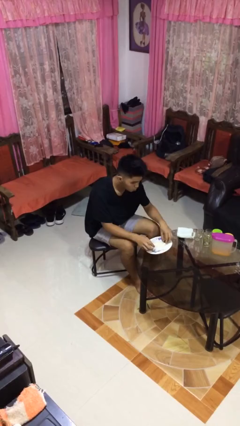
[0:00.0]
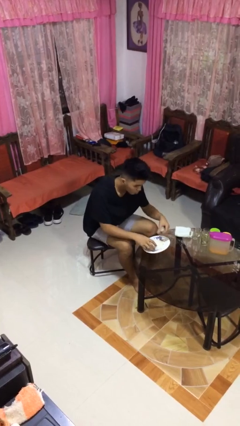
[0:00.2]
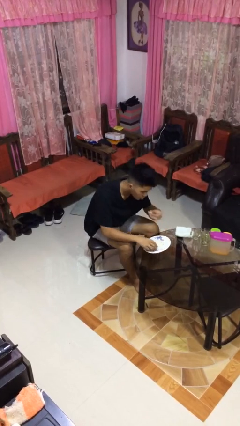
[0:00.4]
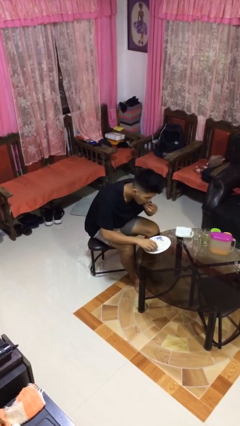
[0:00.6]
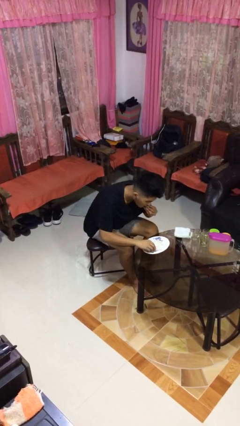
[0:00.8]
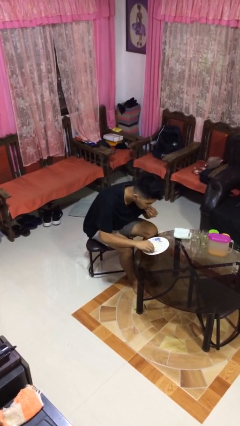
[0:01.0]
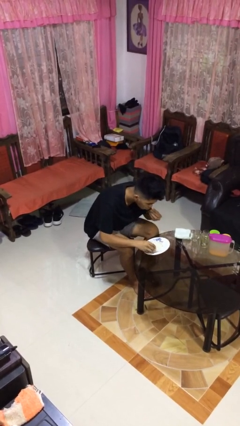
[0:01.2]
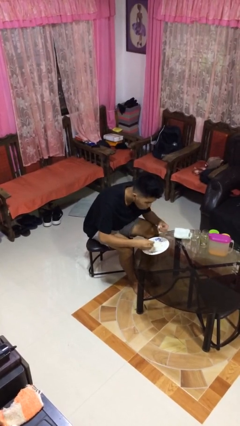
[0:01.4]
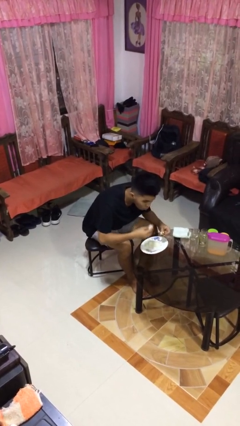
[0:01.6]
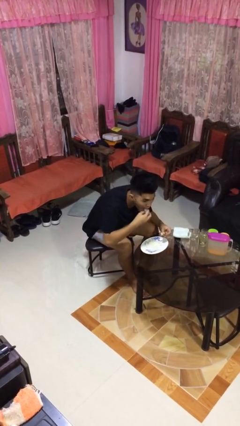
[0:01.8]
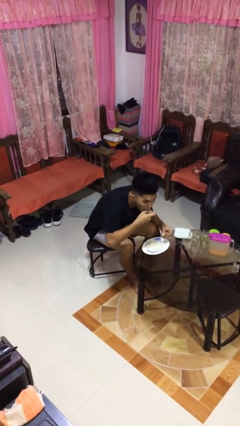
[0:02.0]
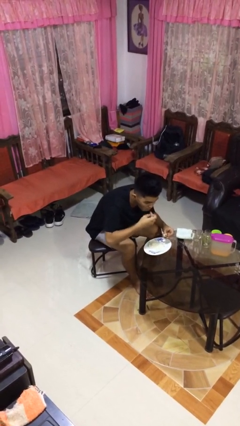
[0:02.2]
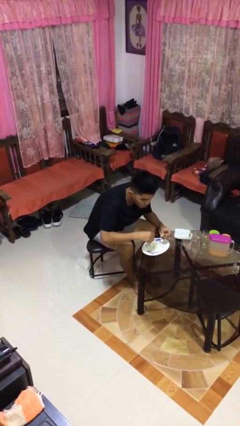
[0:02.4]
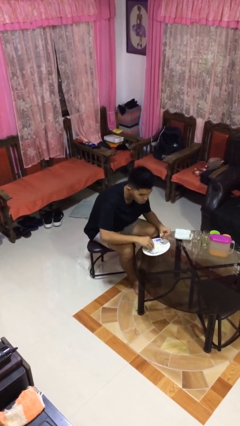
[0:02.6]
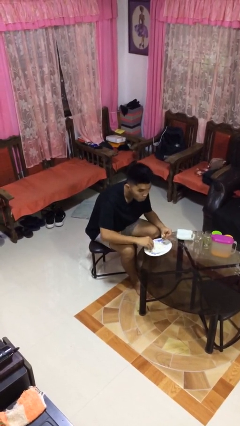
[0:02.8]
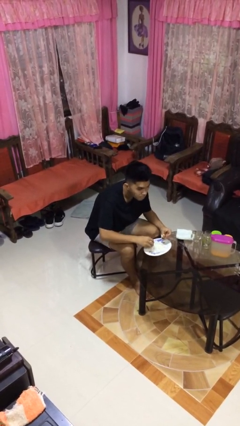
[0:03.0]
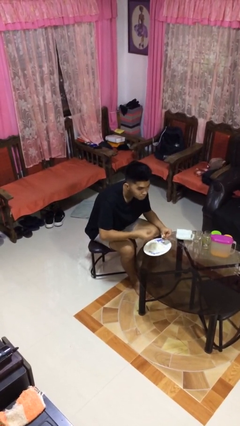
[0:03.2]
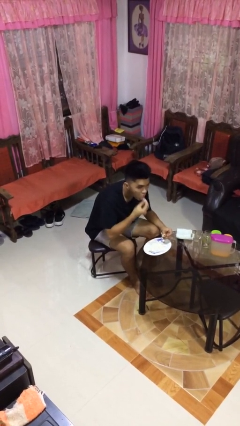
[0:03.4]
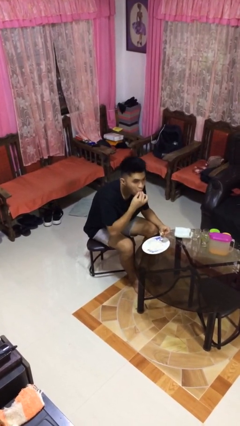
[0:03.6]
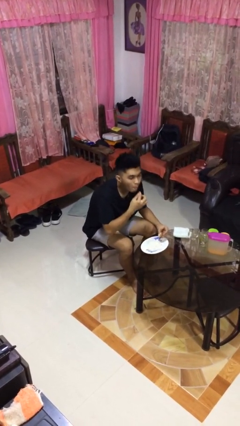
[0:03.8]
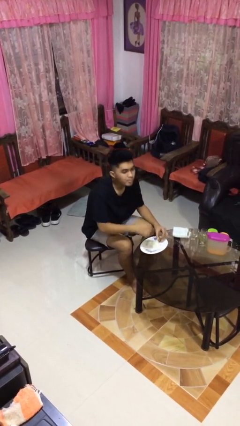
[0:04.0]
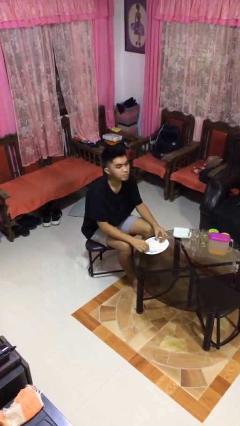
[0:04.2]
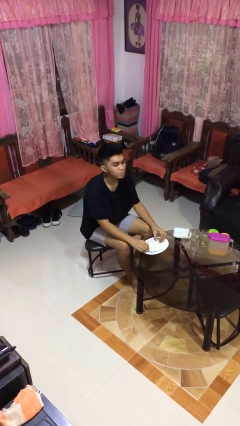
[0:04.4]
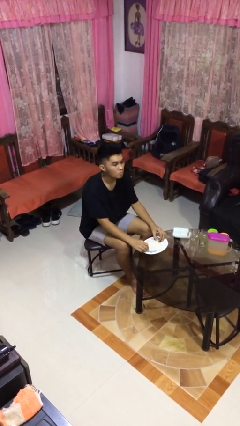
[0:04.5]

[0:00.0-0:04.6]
person eats with hands

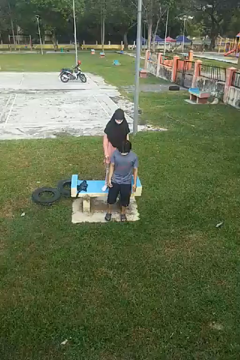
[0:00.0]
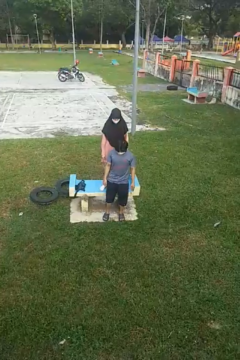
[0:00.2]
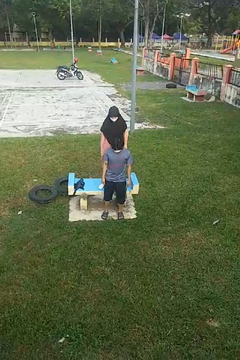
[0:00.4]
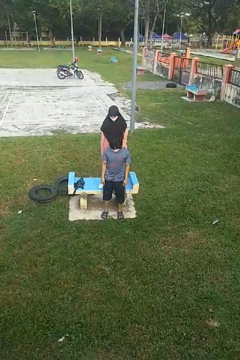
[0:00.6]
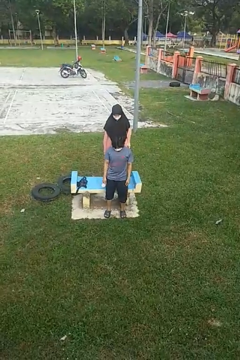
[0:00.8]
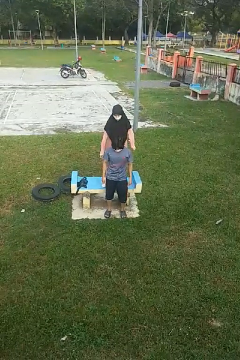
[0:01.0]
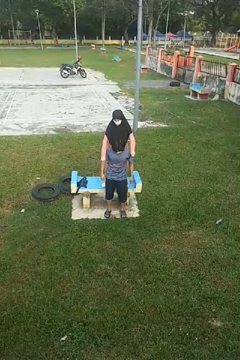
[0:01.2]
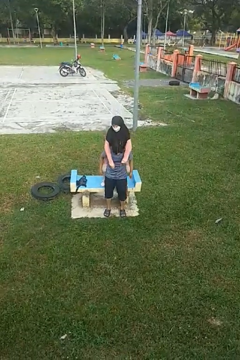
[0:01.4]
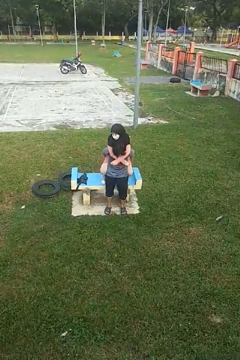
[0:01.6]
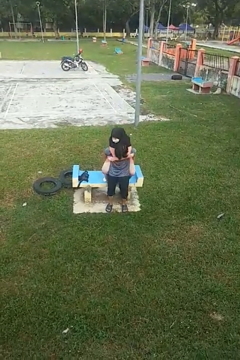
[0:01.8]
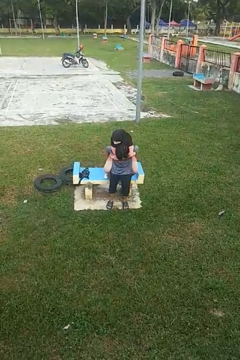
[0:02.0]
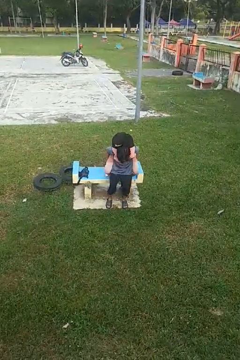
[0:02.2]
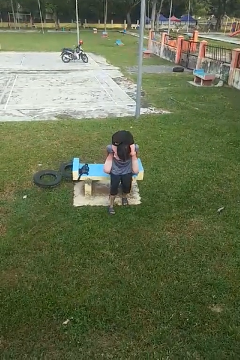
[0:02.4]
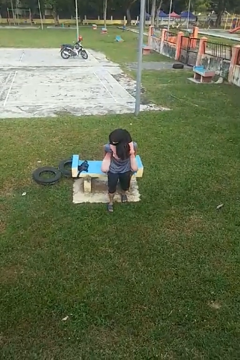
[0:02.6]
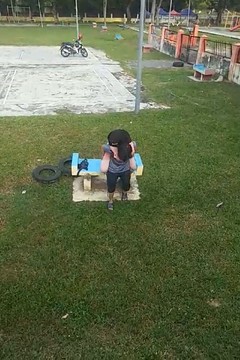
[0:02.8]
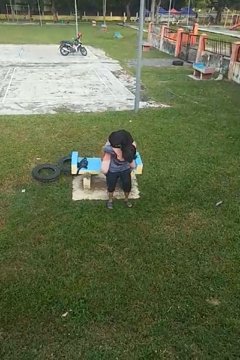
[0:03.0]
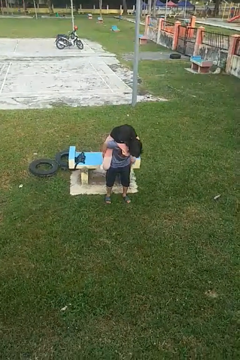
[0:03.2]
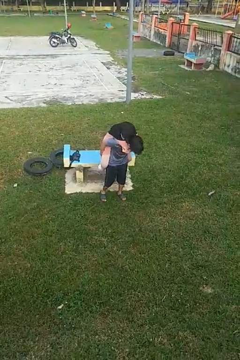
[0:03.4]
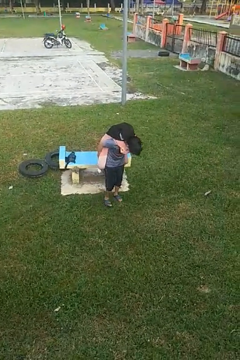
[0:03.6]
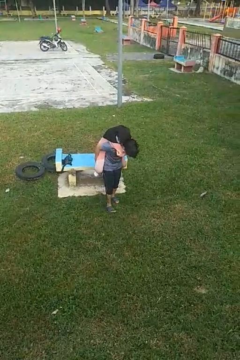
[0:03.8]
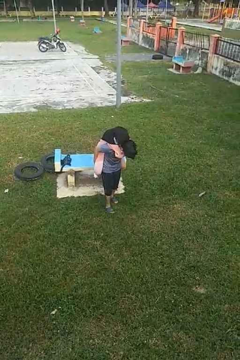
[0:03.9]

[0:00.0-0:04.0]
person carries person over shoulder

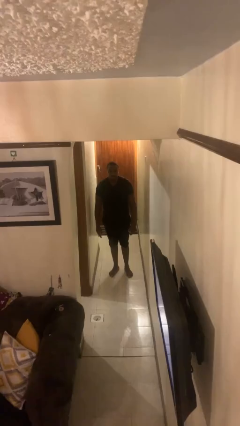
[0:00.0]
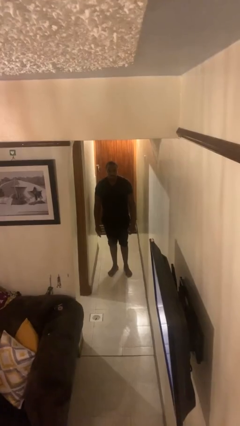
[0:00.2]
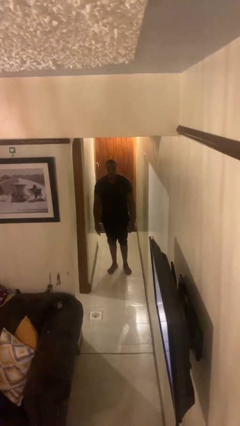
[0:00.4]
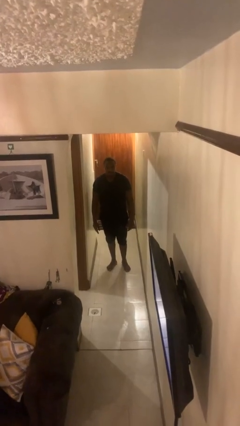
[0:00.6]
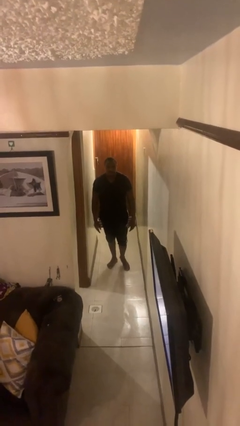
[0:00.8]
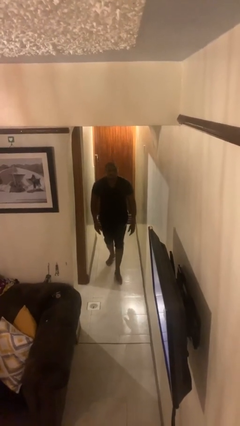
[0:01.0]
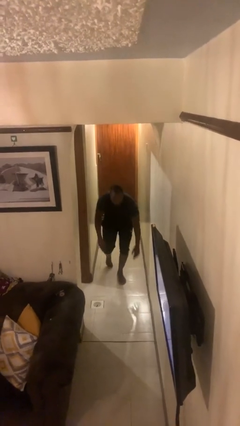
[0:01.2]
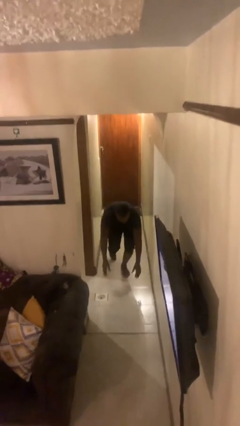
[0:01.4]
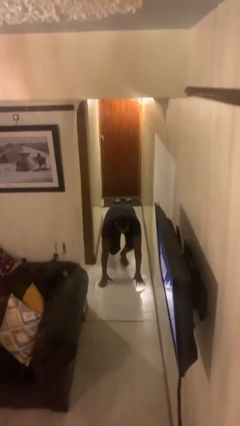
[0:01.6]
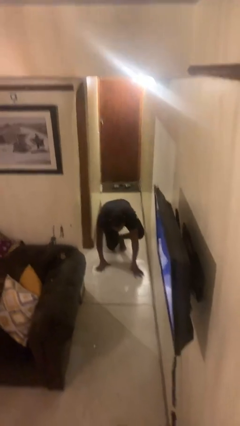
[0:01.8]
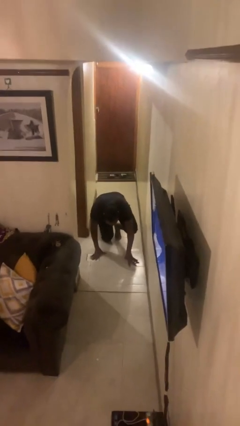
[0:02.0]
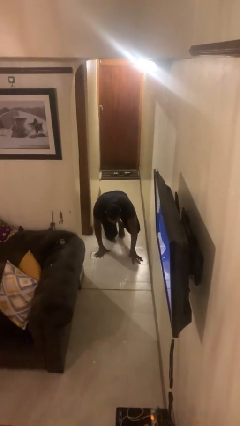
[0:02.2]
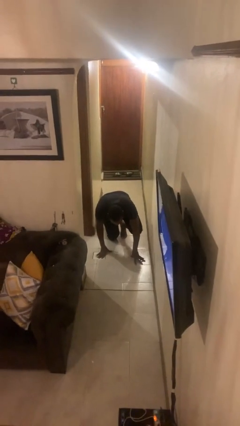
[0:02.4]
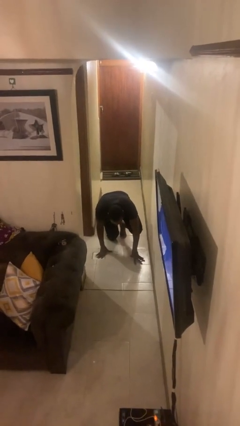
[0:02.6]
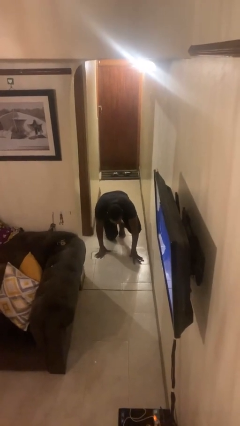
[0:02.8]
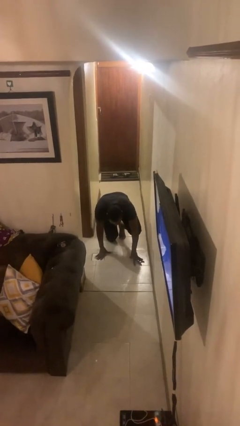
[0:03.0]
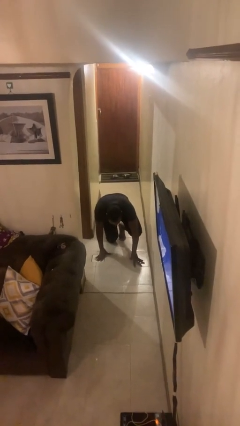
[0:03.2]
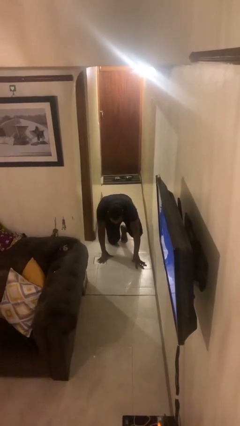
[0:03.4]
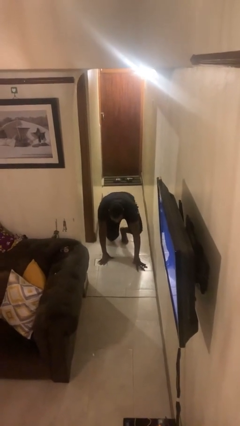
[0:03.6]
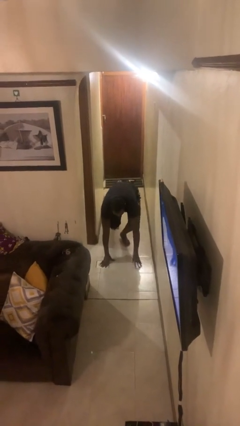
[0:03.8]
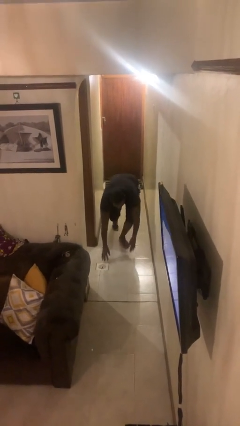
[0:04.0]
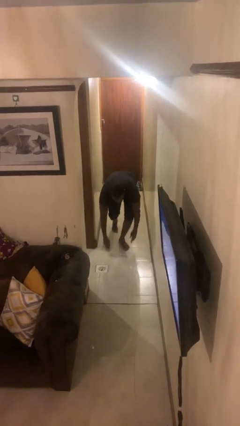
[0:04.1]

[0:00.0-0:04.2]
person trips on object on floor

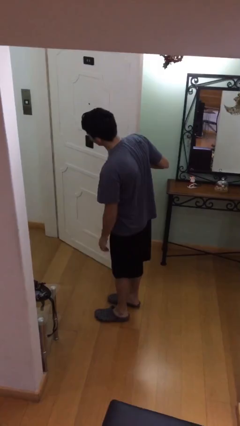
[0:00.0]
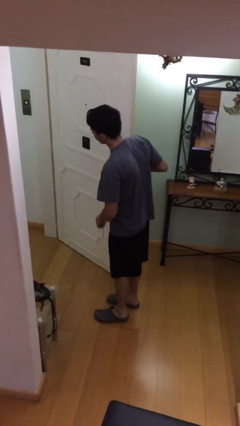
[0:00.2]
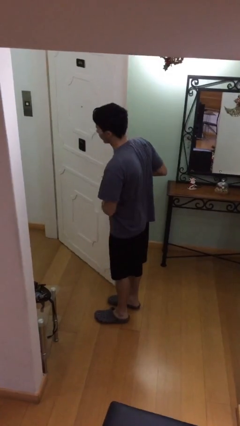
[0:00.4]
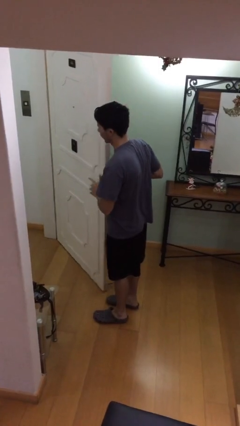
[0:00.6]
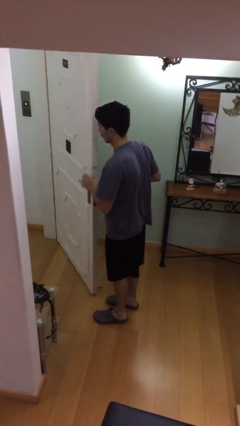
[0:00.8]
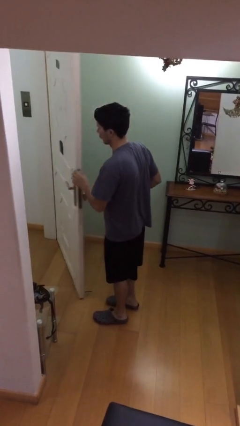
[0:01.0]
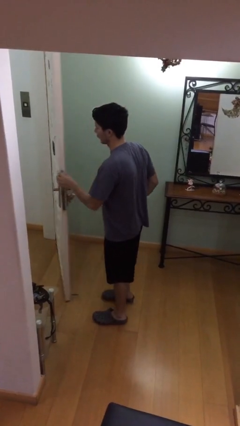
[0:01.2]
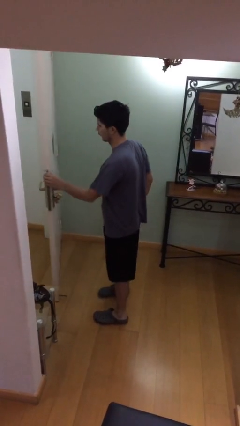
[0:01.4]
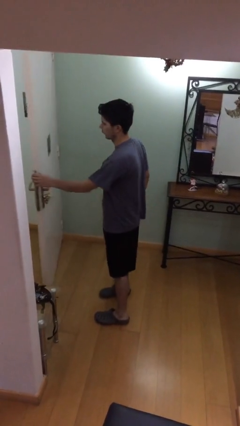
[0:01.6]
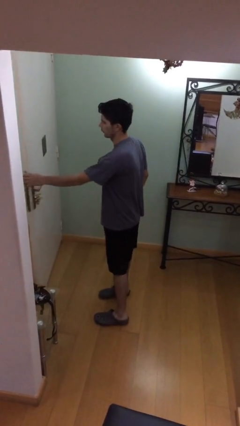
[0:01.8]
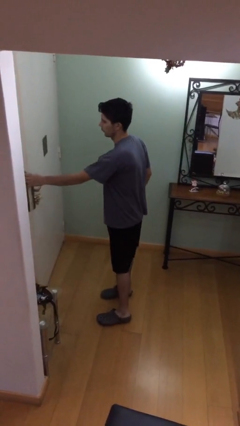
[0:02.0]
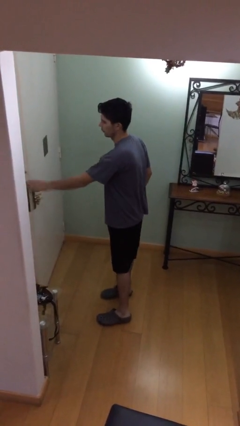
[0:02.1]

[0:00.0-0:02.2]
person closes facility door

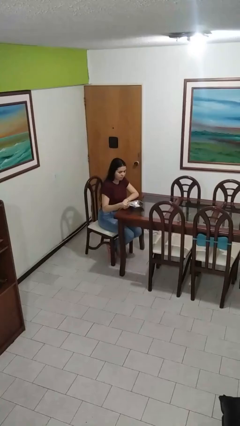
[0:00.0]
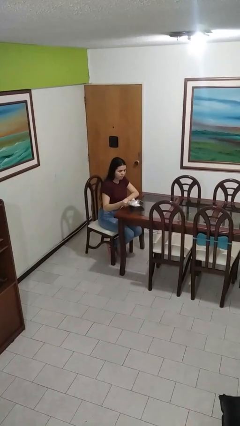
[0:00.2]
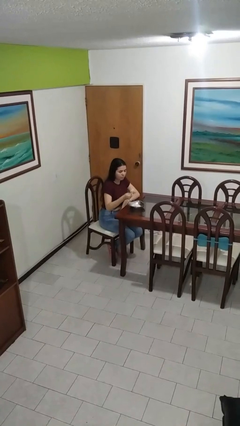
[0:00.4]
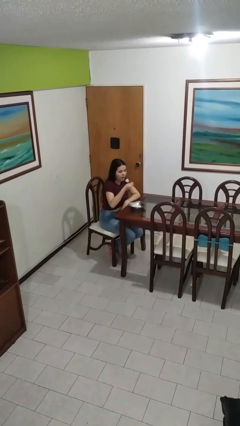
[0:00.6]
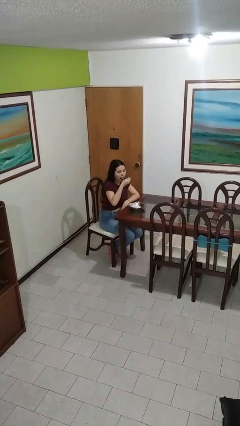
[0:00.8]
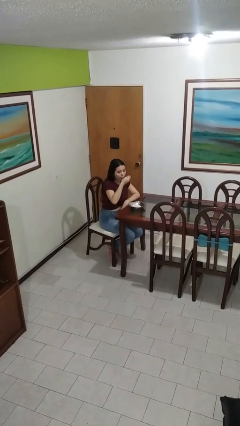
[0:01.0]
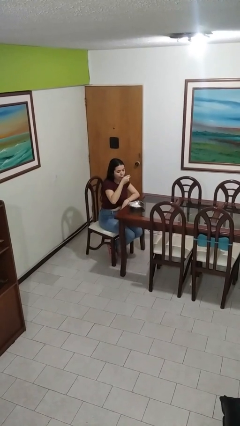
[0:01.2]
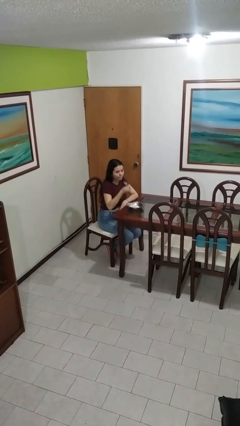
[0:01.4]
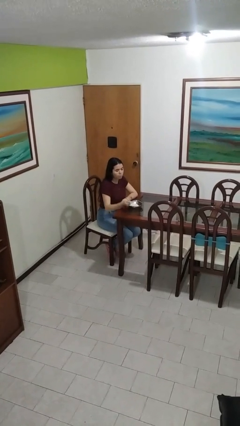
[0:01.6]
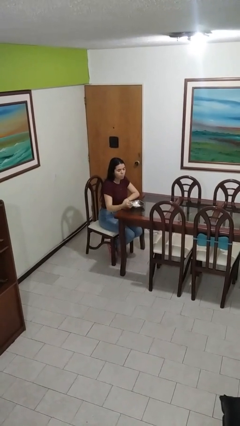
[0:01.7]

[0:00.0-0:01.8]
person eats with utensil

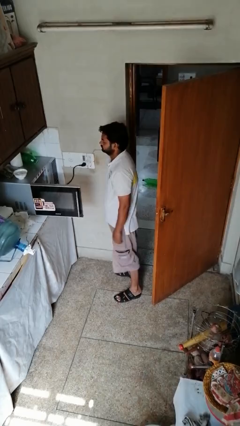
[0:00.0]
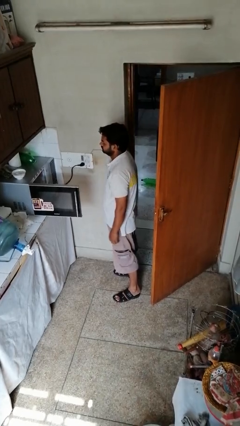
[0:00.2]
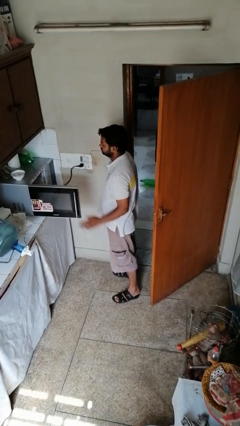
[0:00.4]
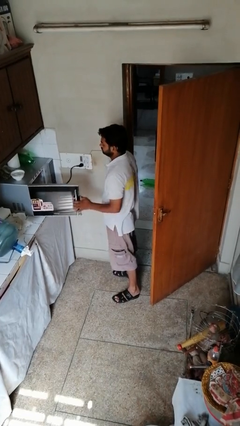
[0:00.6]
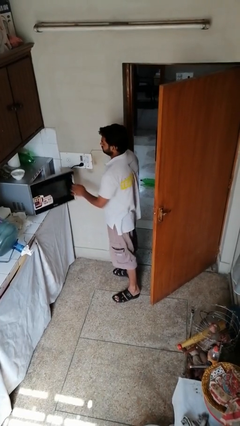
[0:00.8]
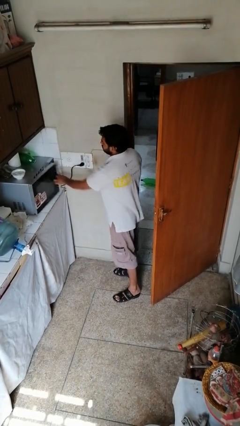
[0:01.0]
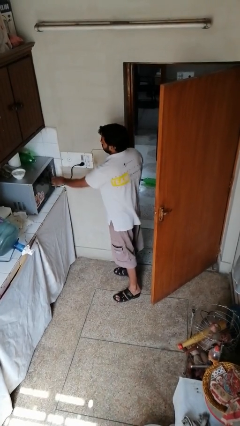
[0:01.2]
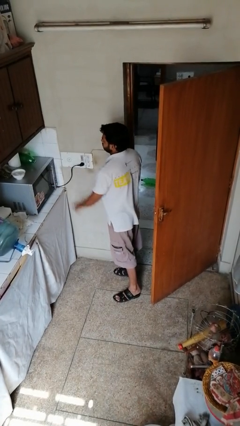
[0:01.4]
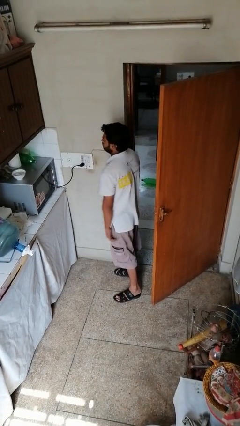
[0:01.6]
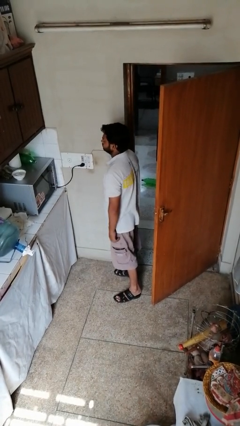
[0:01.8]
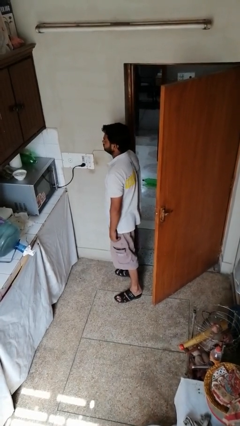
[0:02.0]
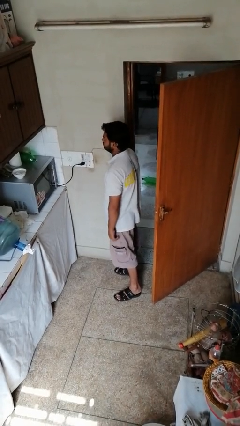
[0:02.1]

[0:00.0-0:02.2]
person closes microwave
